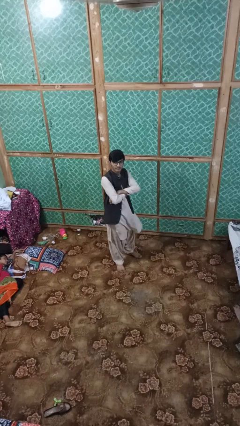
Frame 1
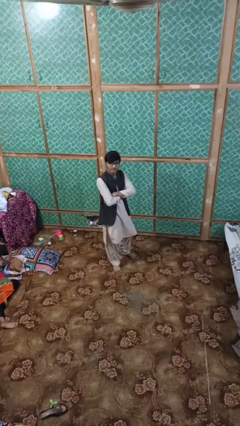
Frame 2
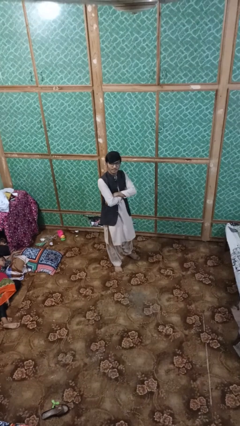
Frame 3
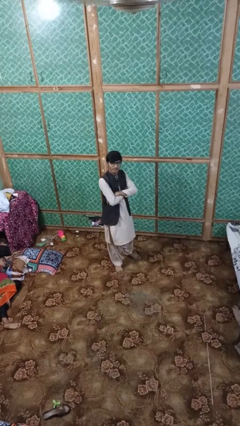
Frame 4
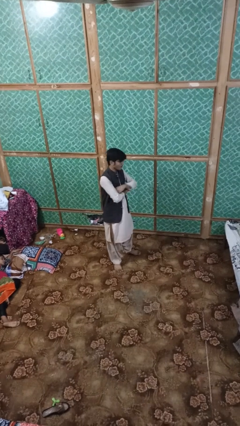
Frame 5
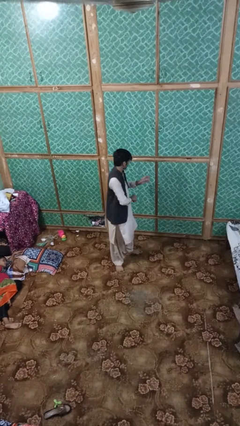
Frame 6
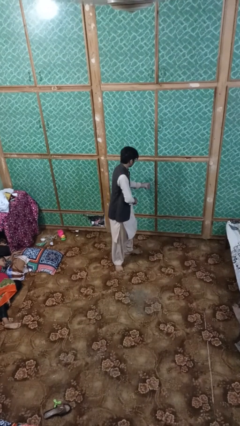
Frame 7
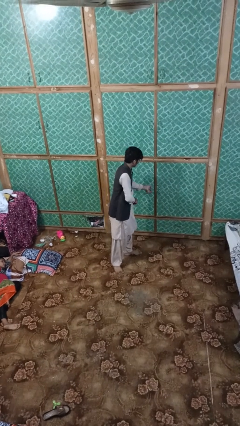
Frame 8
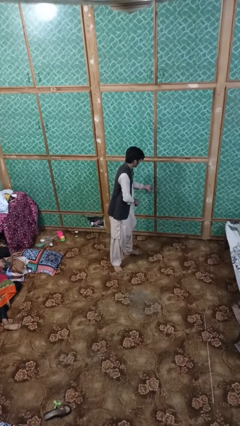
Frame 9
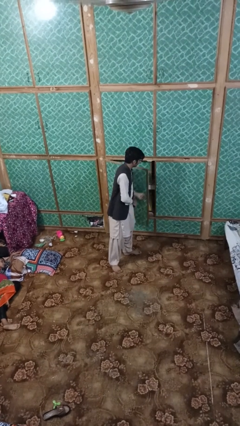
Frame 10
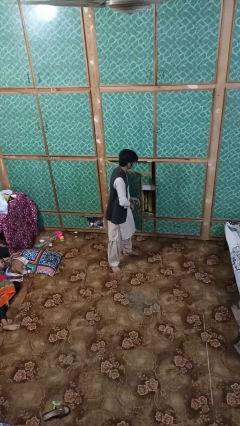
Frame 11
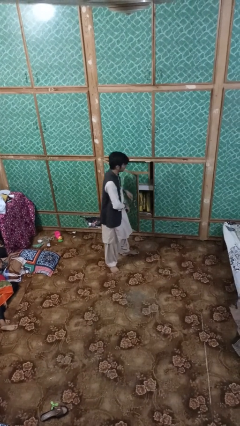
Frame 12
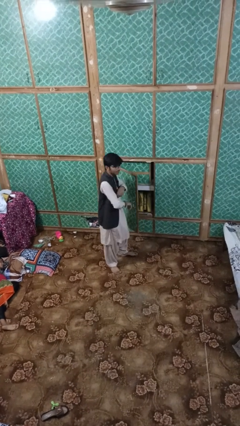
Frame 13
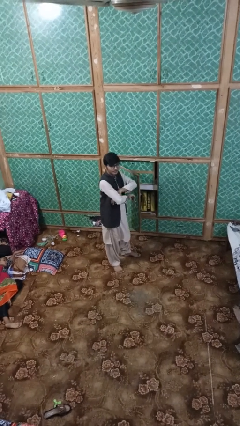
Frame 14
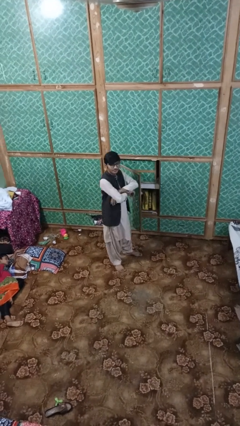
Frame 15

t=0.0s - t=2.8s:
person opens dresser drawer

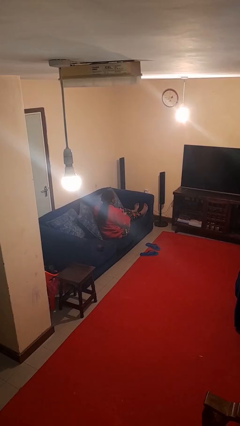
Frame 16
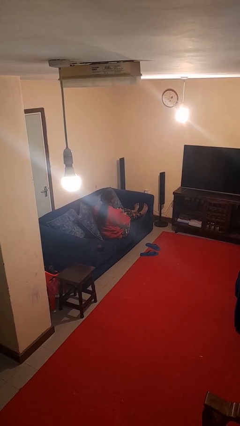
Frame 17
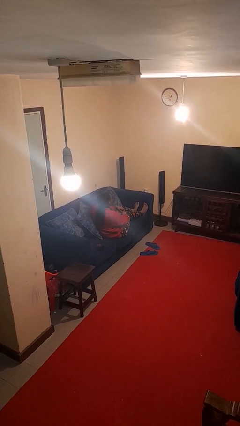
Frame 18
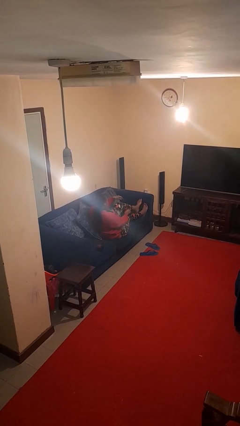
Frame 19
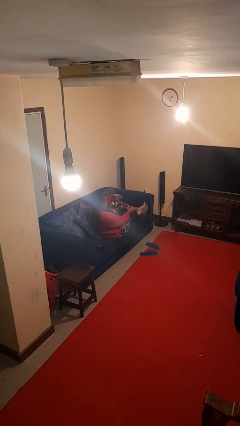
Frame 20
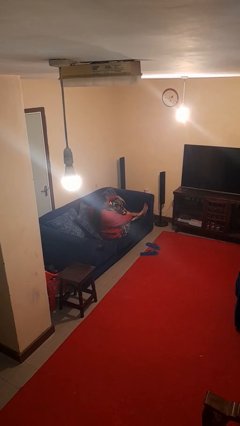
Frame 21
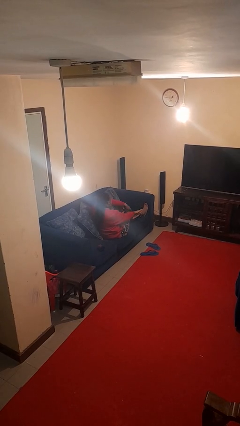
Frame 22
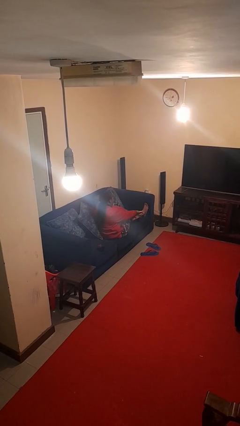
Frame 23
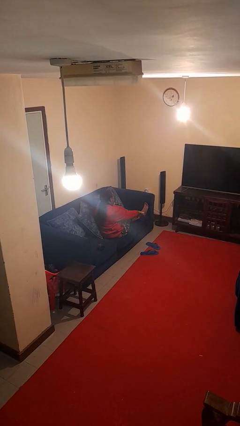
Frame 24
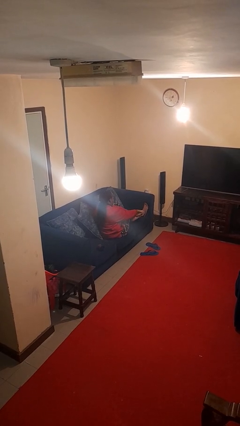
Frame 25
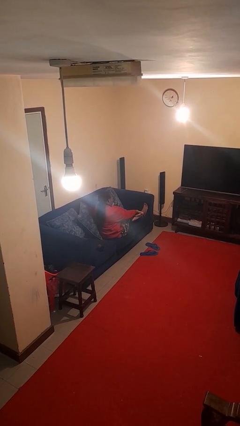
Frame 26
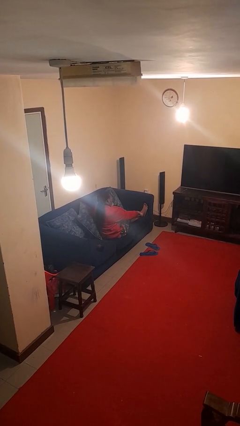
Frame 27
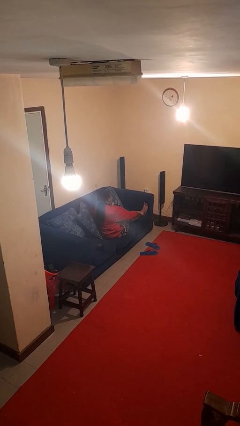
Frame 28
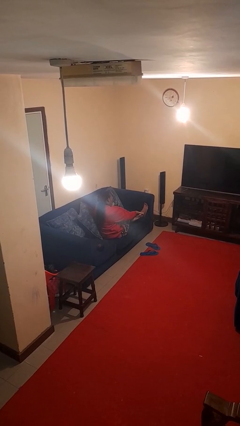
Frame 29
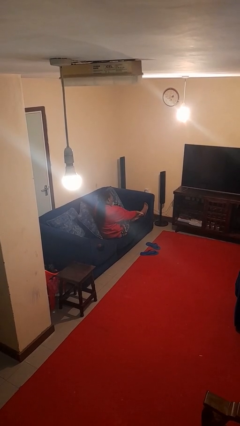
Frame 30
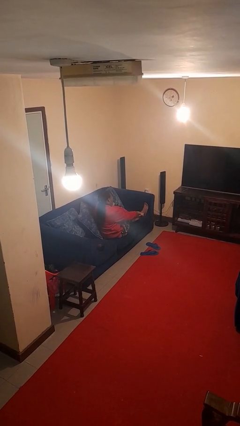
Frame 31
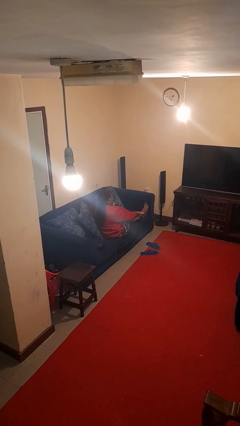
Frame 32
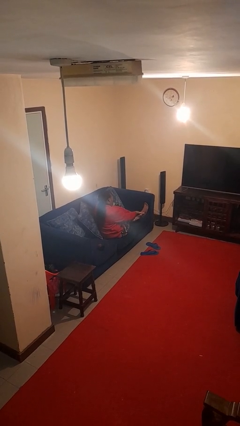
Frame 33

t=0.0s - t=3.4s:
person rubs foot

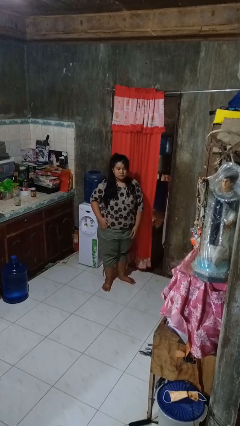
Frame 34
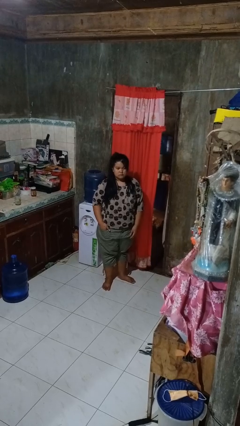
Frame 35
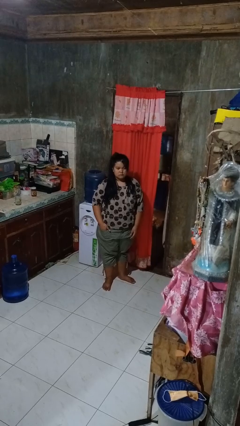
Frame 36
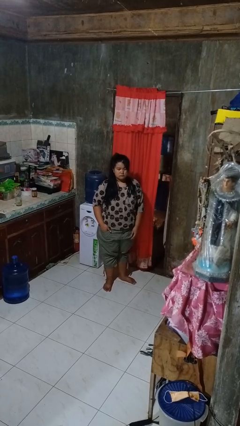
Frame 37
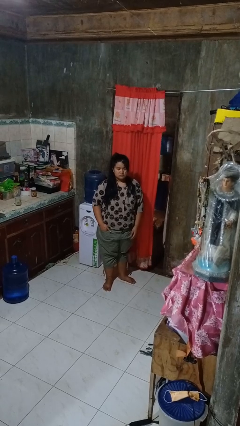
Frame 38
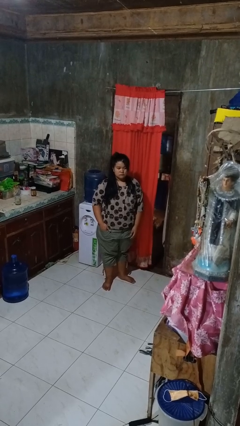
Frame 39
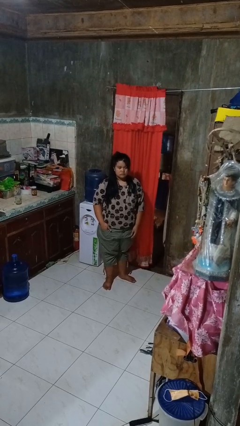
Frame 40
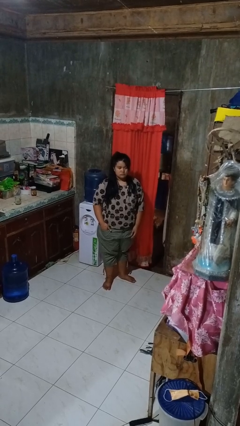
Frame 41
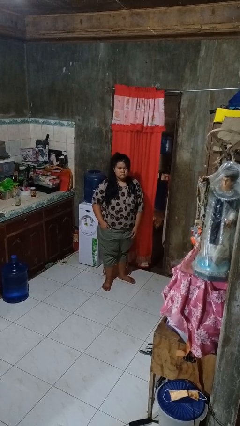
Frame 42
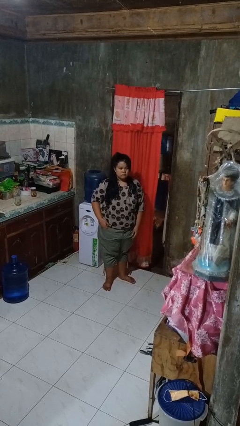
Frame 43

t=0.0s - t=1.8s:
person puts hands in back pockets

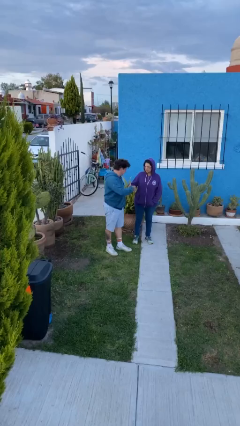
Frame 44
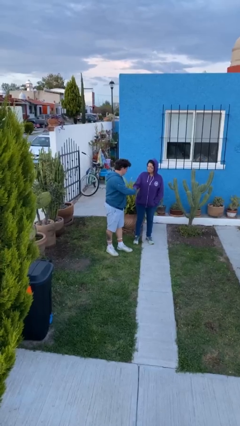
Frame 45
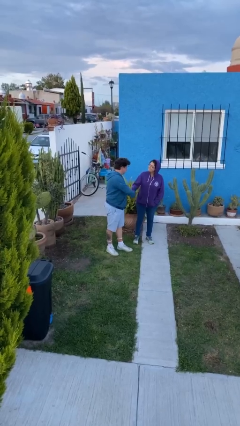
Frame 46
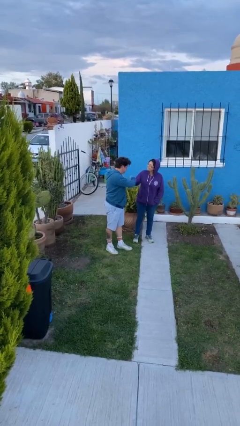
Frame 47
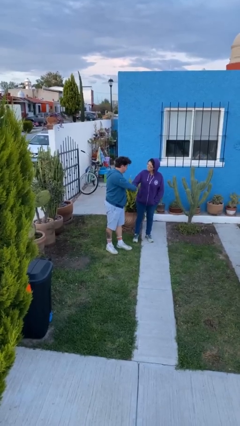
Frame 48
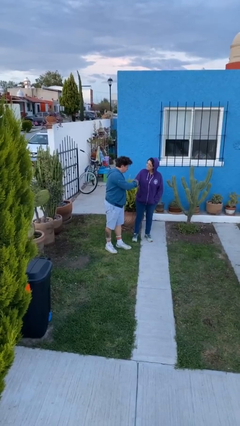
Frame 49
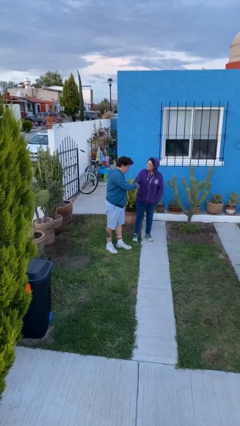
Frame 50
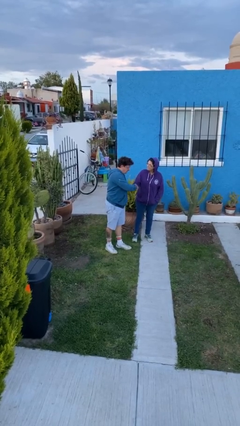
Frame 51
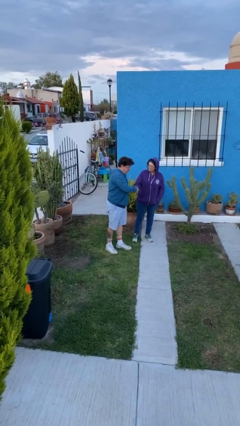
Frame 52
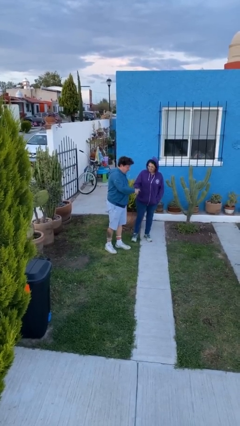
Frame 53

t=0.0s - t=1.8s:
person shakes hand

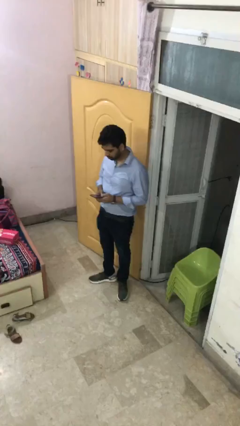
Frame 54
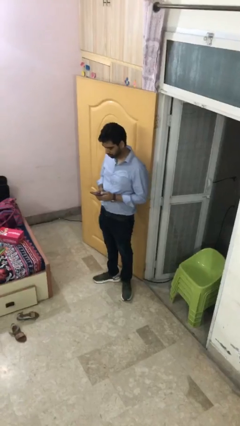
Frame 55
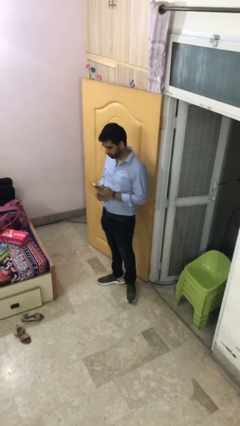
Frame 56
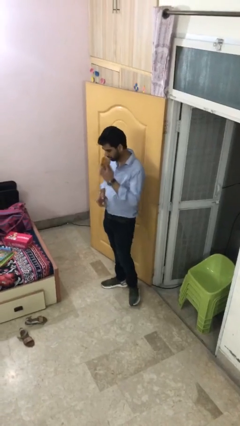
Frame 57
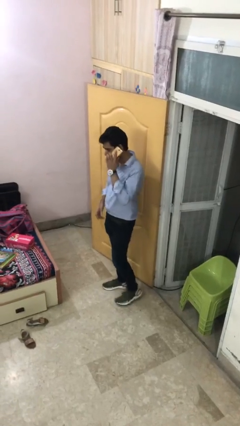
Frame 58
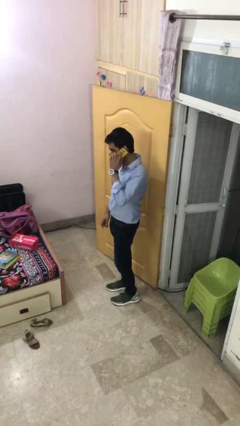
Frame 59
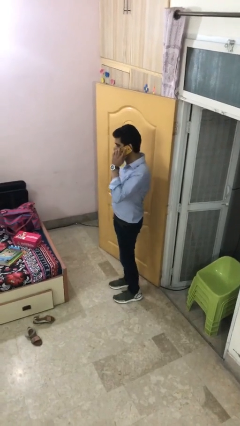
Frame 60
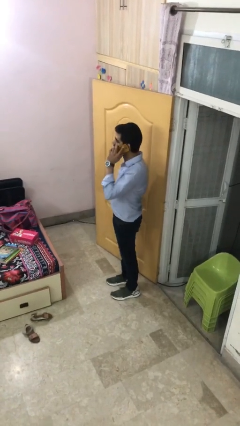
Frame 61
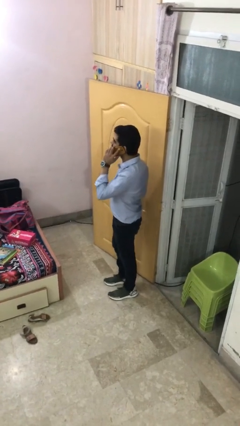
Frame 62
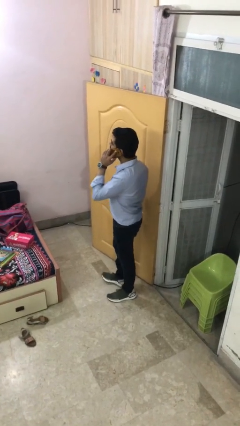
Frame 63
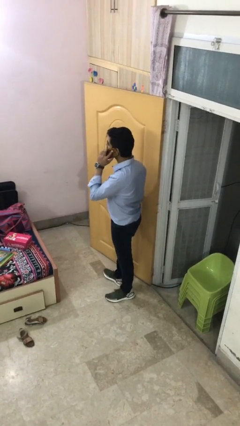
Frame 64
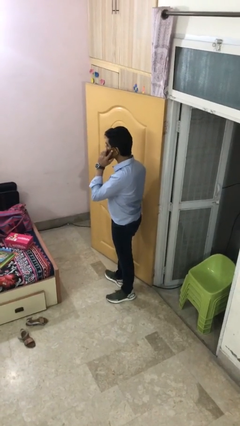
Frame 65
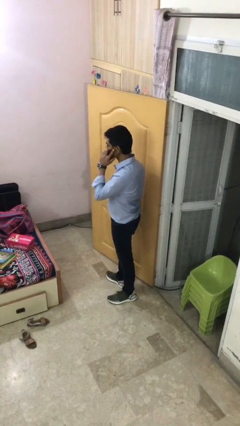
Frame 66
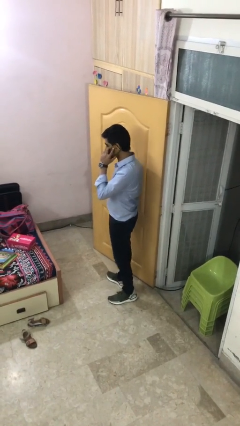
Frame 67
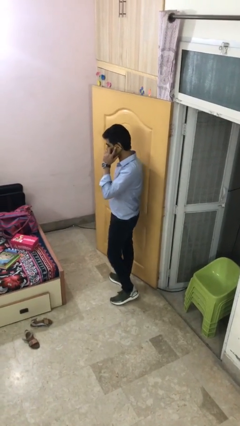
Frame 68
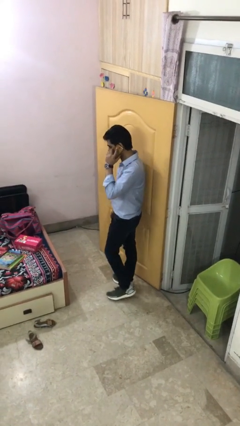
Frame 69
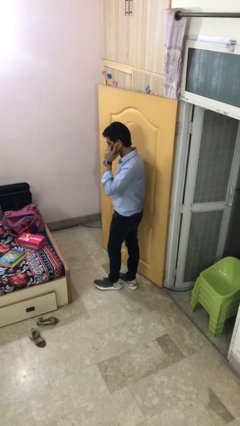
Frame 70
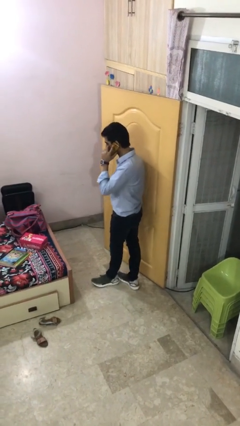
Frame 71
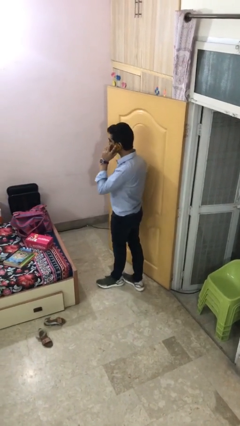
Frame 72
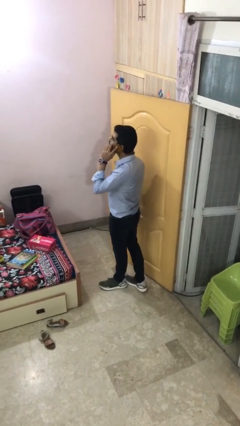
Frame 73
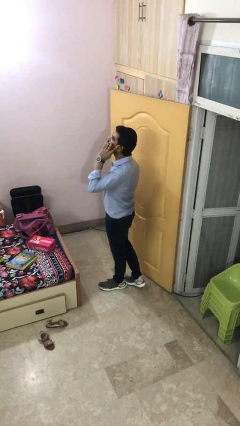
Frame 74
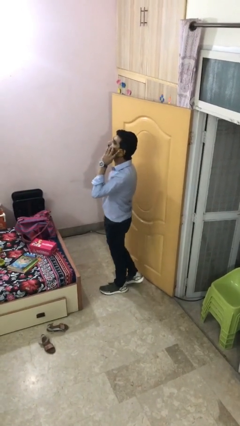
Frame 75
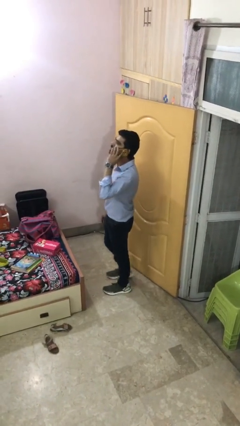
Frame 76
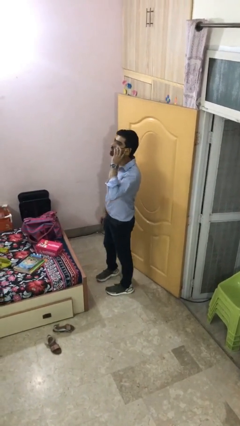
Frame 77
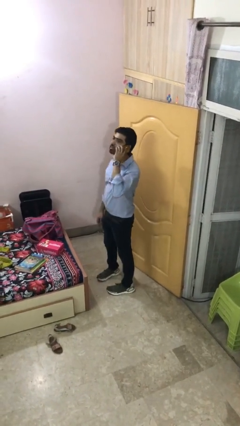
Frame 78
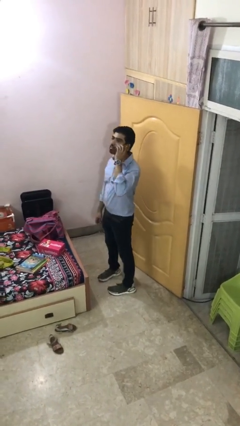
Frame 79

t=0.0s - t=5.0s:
person talks on phone

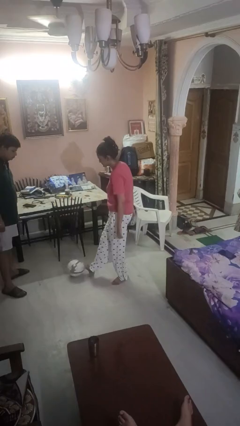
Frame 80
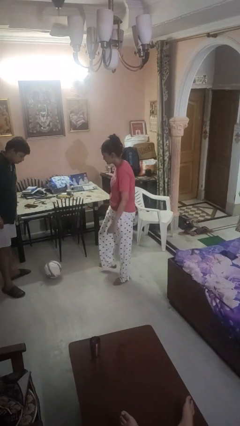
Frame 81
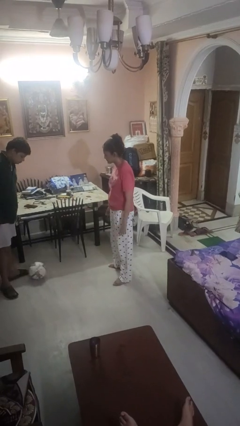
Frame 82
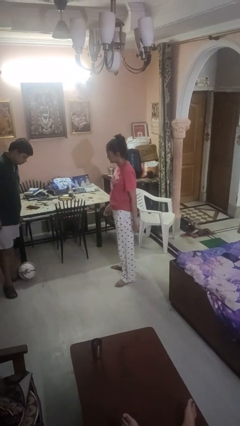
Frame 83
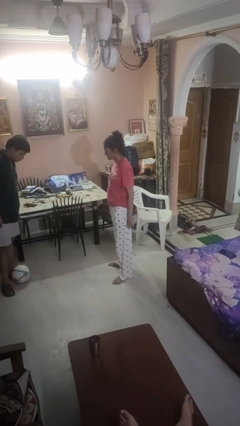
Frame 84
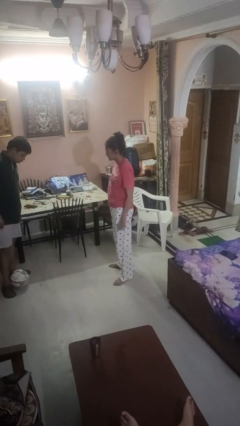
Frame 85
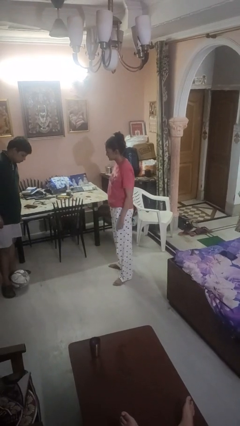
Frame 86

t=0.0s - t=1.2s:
person kicks object to person

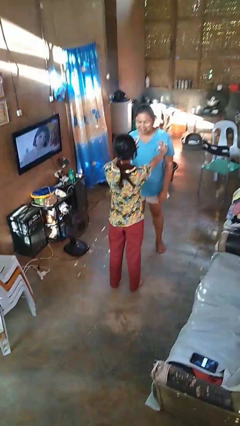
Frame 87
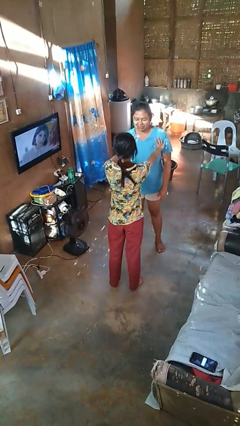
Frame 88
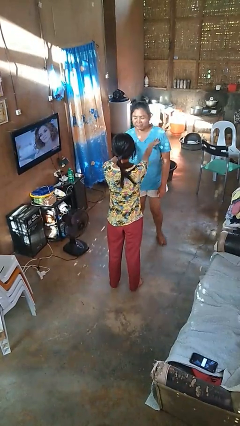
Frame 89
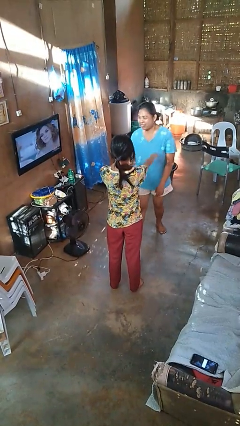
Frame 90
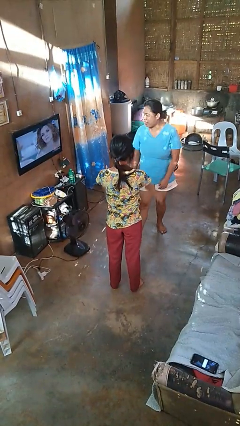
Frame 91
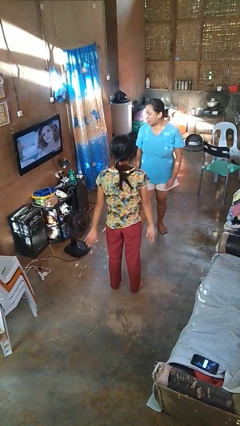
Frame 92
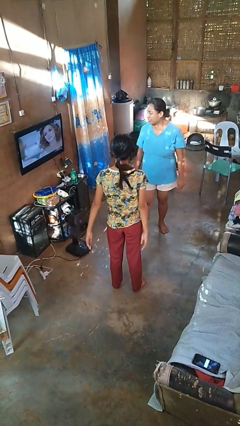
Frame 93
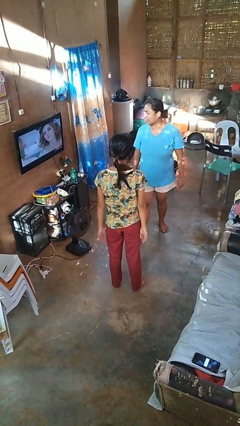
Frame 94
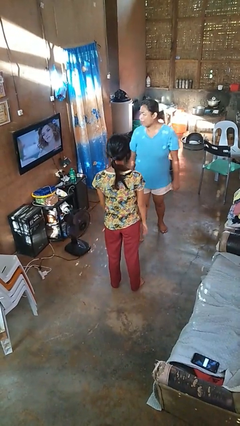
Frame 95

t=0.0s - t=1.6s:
person shoves person
